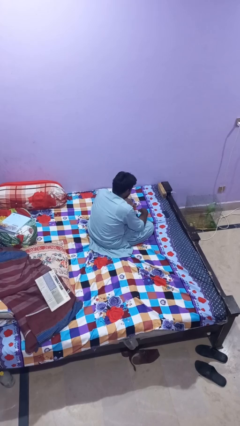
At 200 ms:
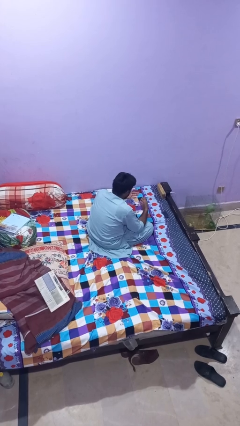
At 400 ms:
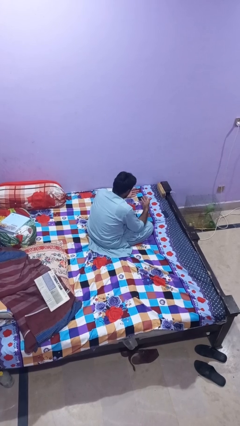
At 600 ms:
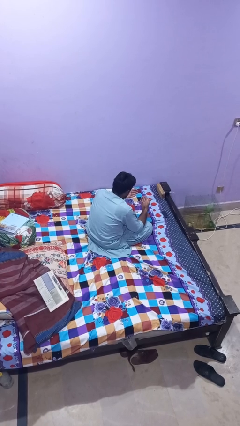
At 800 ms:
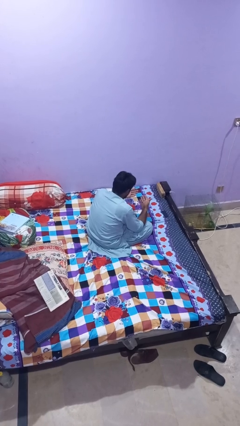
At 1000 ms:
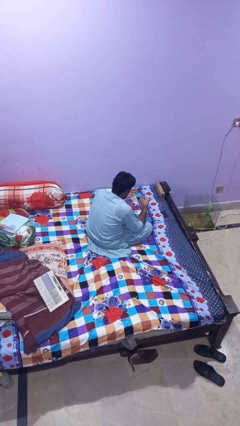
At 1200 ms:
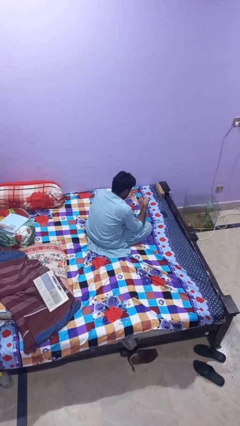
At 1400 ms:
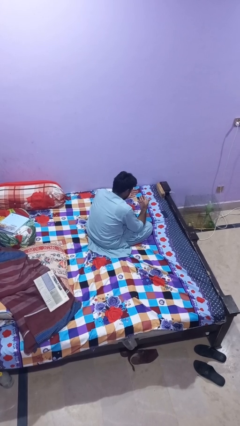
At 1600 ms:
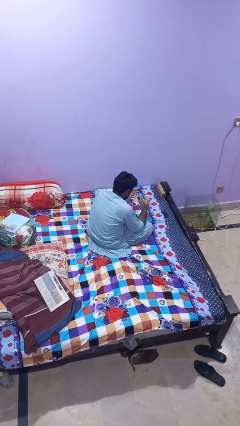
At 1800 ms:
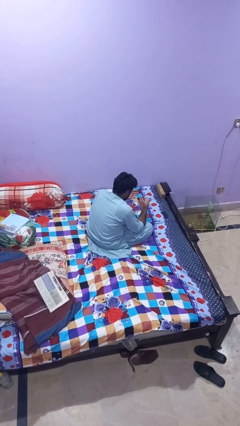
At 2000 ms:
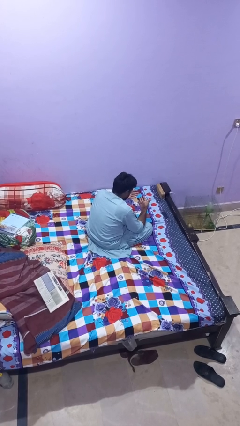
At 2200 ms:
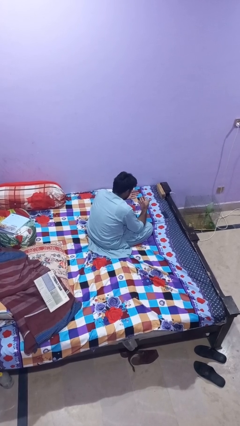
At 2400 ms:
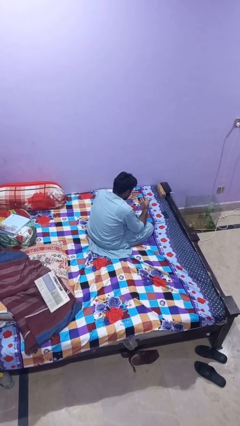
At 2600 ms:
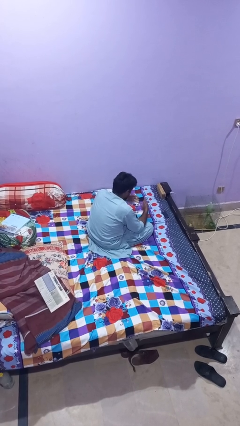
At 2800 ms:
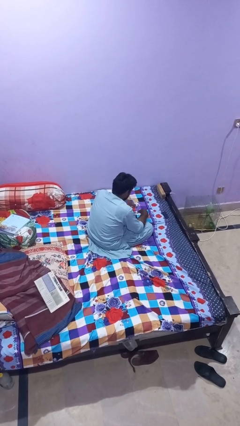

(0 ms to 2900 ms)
person looks at hands in lap

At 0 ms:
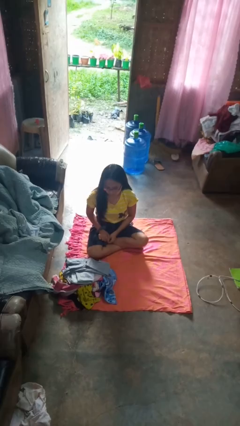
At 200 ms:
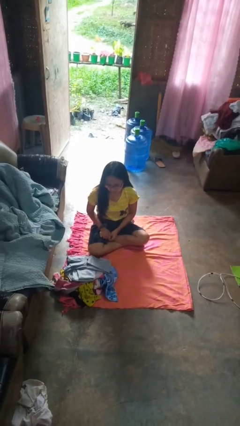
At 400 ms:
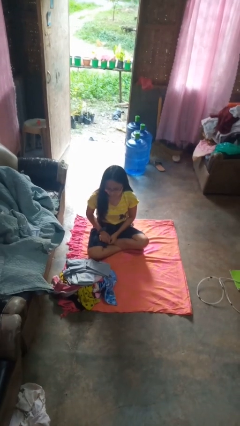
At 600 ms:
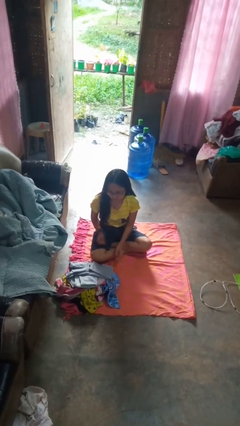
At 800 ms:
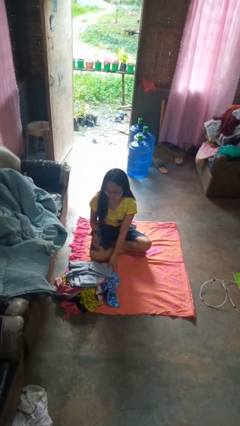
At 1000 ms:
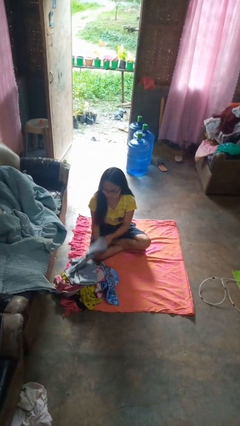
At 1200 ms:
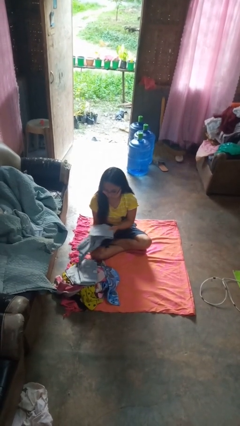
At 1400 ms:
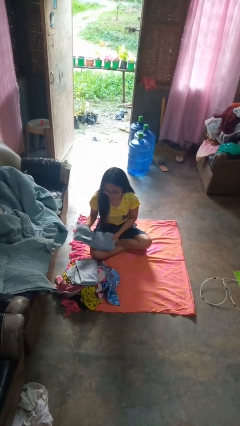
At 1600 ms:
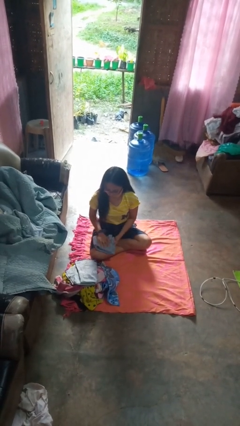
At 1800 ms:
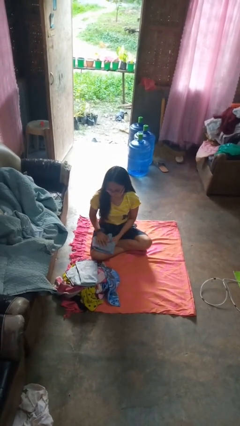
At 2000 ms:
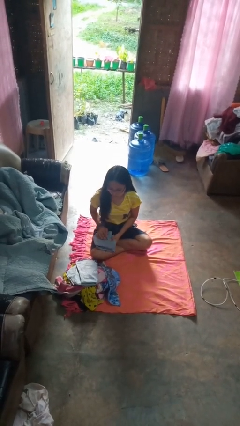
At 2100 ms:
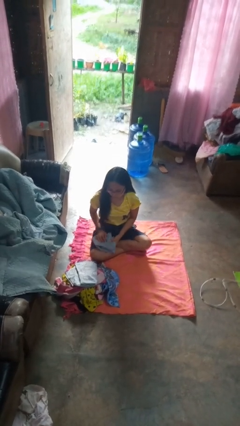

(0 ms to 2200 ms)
person folds shirt

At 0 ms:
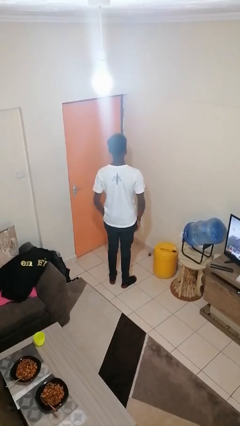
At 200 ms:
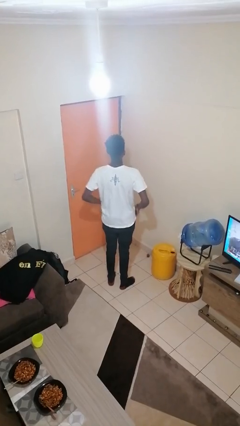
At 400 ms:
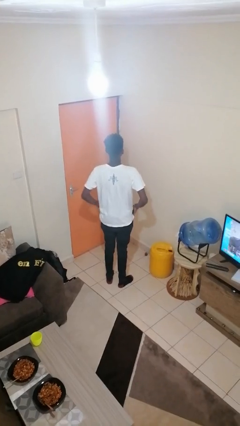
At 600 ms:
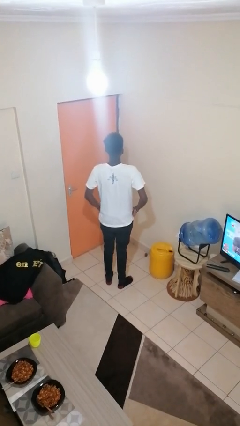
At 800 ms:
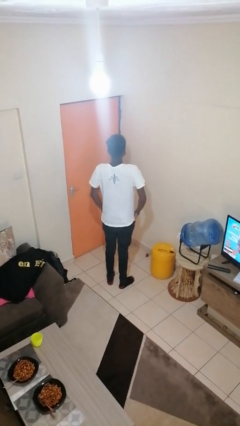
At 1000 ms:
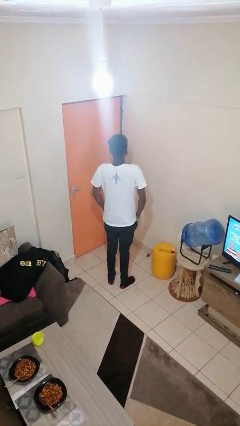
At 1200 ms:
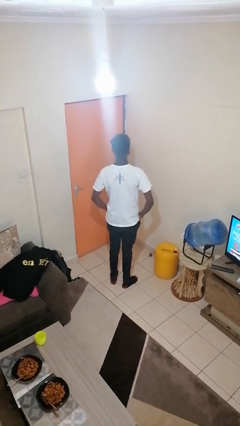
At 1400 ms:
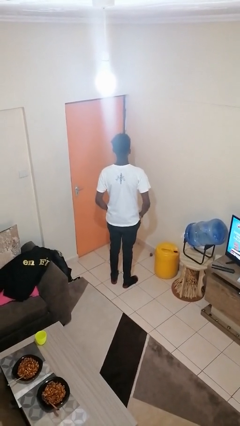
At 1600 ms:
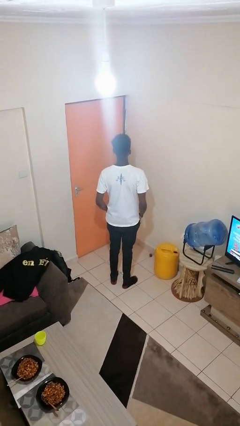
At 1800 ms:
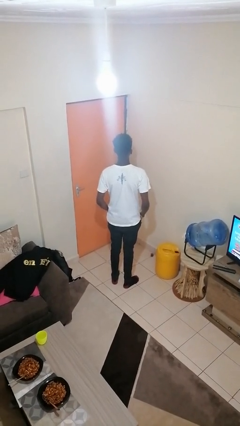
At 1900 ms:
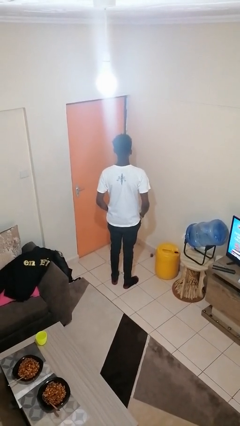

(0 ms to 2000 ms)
person puts hands in back pockets

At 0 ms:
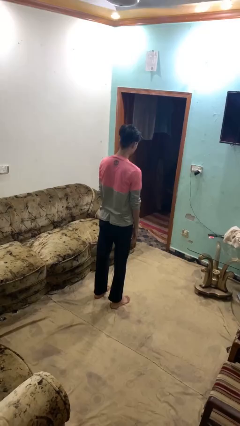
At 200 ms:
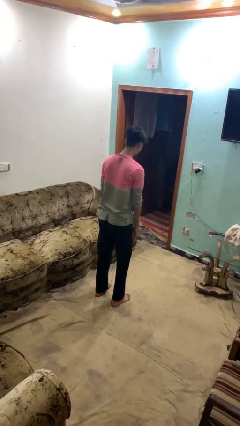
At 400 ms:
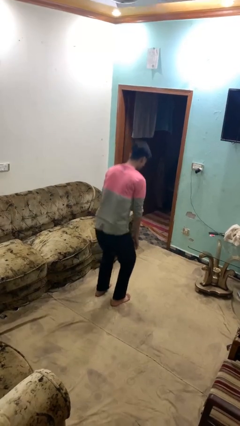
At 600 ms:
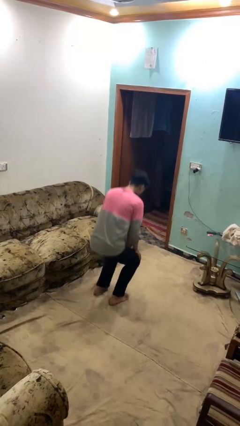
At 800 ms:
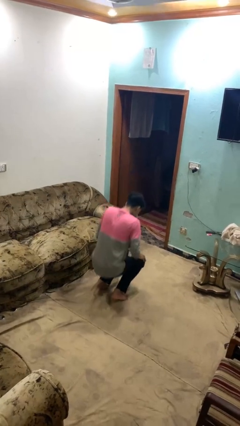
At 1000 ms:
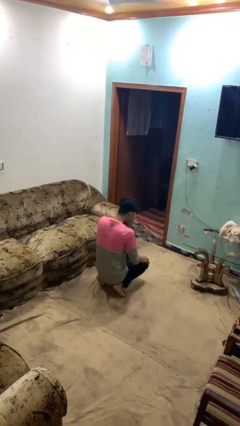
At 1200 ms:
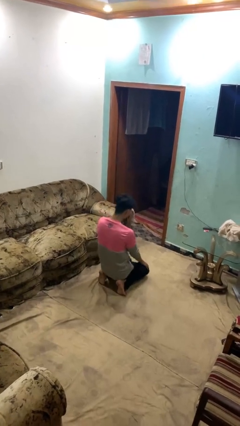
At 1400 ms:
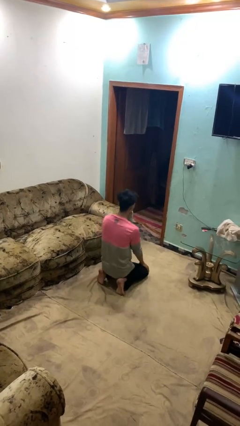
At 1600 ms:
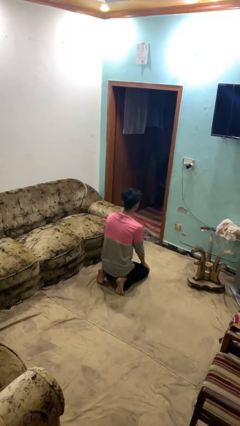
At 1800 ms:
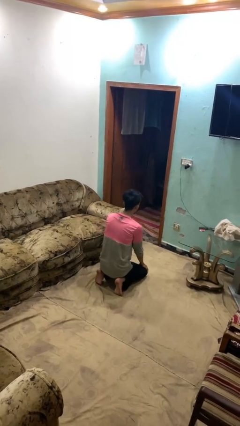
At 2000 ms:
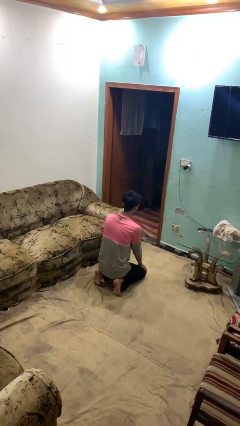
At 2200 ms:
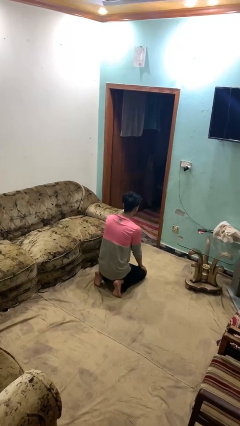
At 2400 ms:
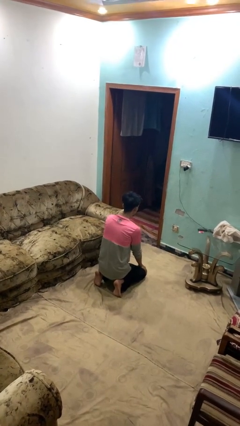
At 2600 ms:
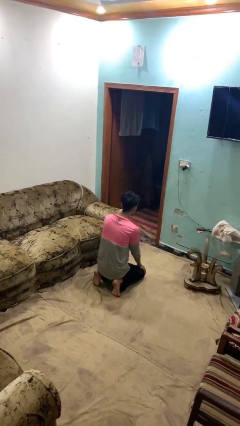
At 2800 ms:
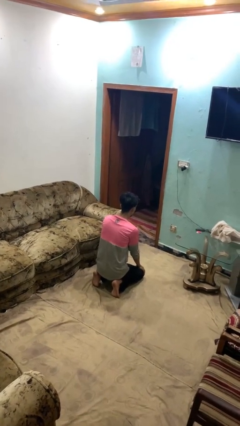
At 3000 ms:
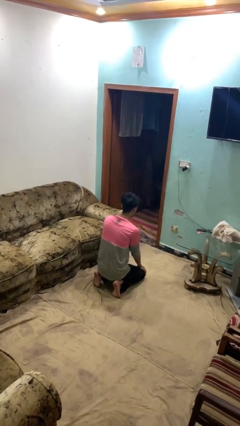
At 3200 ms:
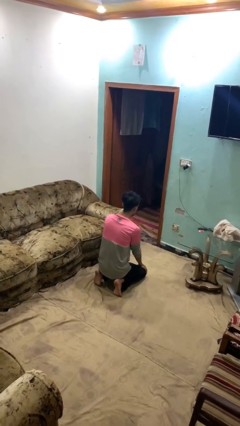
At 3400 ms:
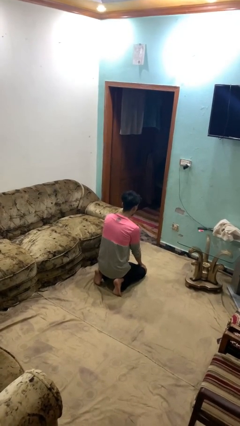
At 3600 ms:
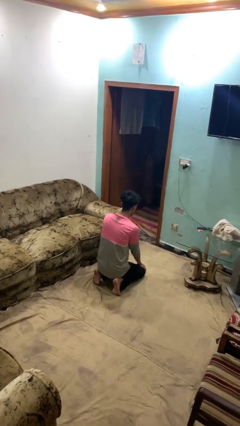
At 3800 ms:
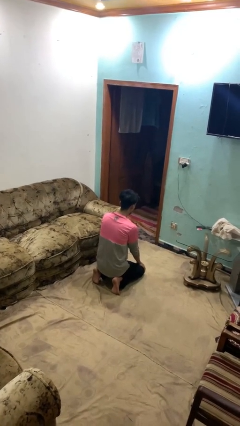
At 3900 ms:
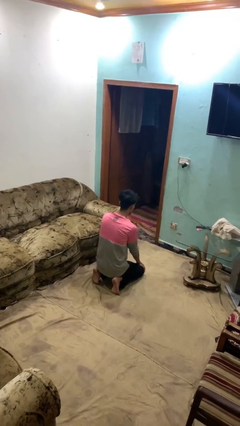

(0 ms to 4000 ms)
person kneels

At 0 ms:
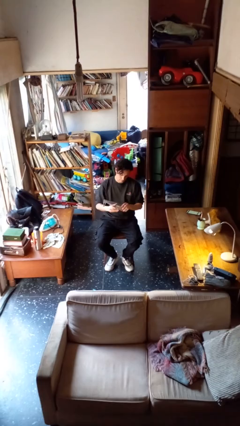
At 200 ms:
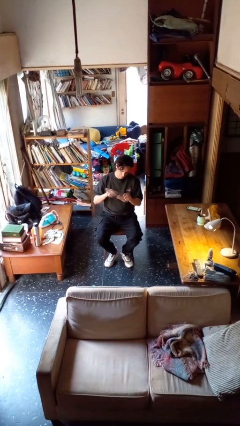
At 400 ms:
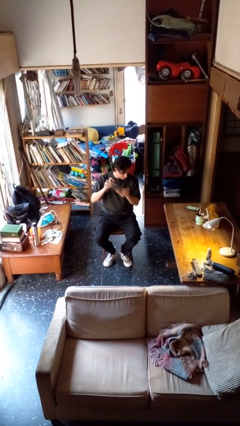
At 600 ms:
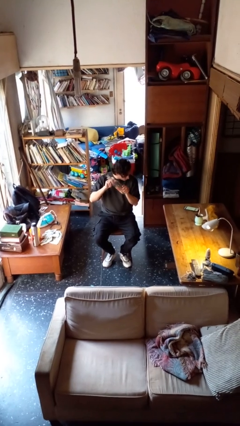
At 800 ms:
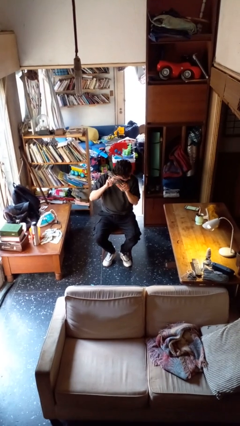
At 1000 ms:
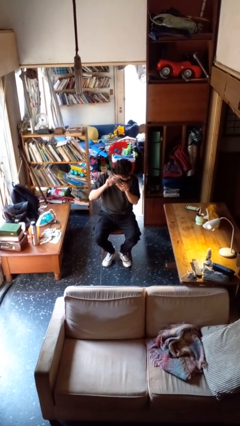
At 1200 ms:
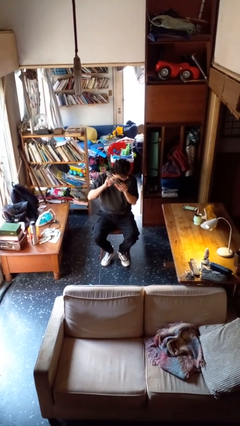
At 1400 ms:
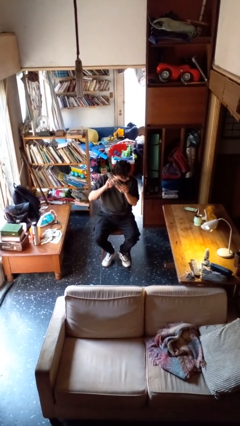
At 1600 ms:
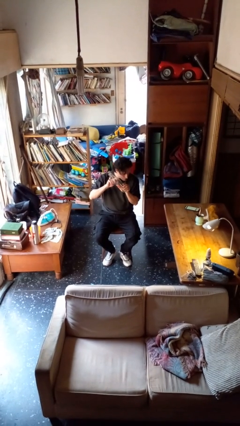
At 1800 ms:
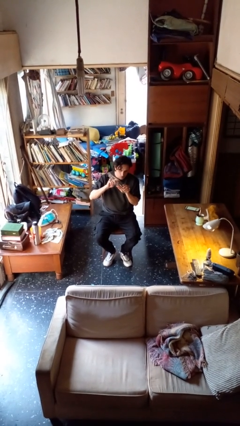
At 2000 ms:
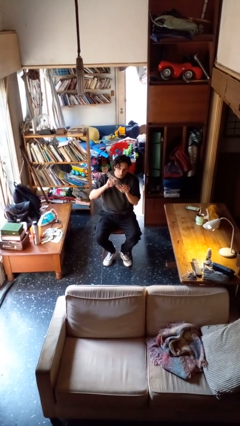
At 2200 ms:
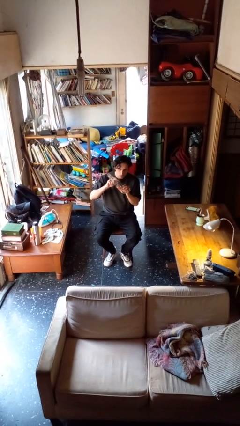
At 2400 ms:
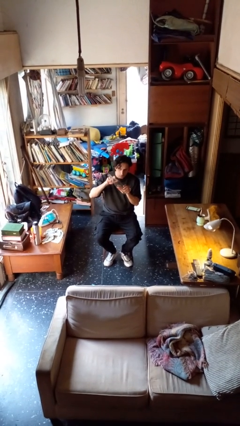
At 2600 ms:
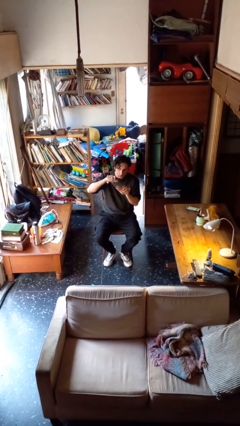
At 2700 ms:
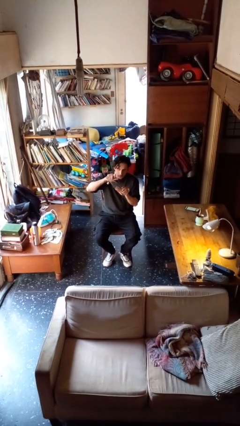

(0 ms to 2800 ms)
person taps object with finger

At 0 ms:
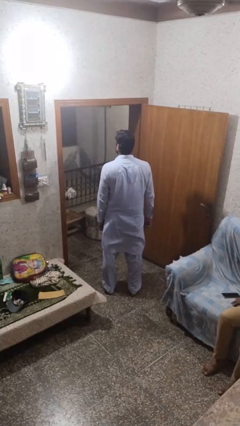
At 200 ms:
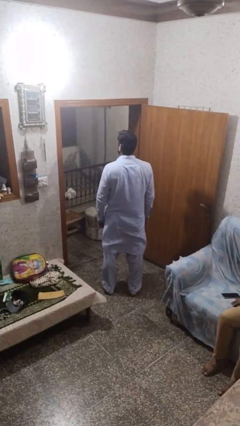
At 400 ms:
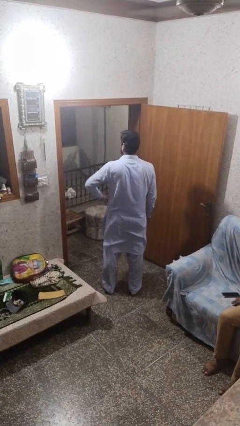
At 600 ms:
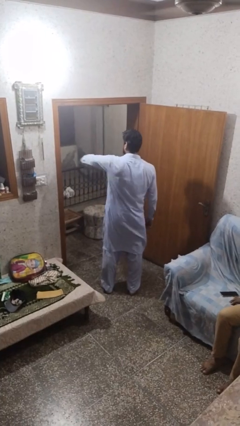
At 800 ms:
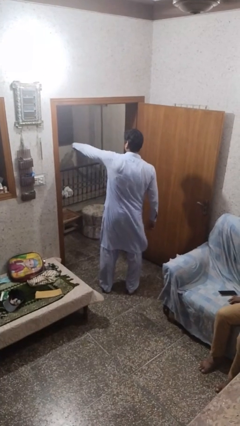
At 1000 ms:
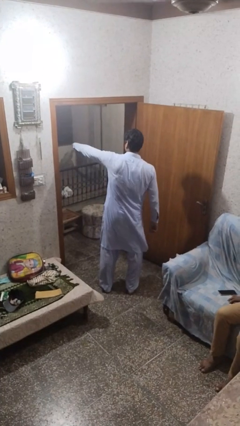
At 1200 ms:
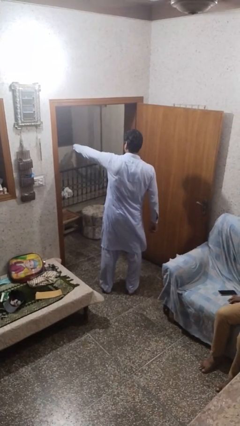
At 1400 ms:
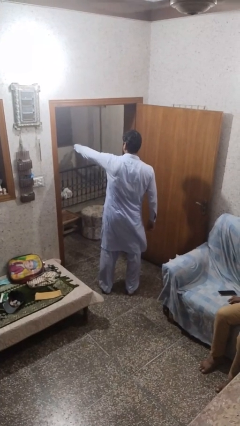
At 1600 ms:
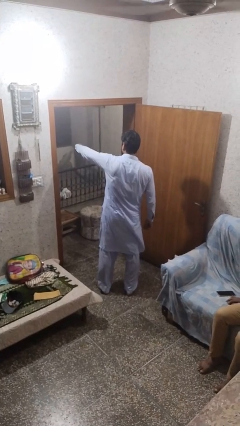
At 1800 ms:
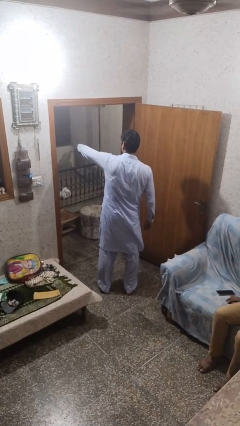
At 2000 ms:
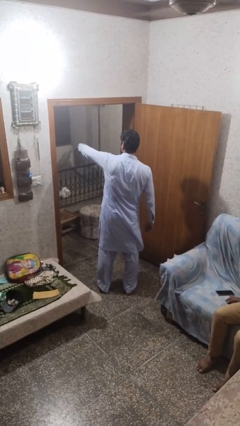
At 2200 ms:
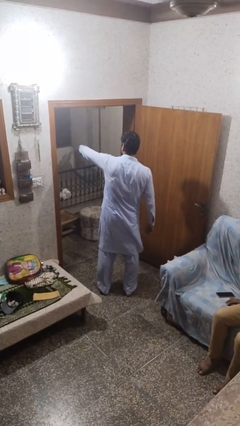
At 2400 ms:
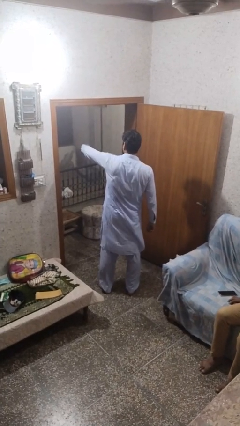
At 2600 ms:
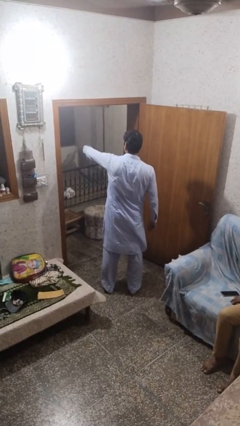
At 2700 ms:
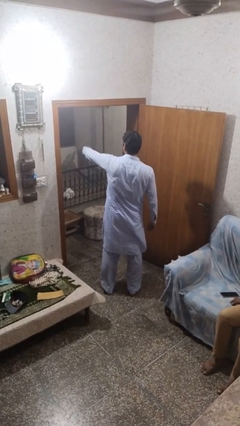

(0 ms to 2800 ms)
person karate chop

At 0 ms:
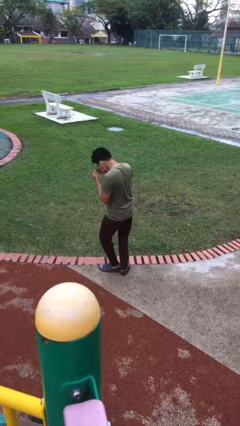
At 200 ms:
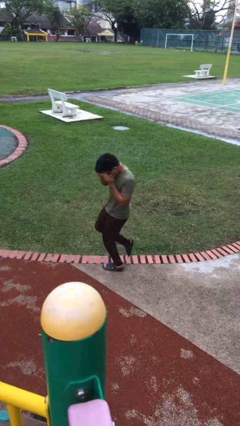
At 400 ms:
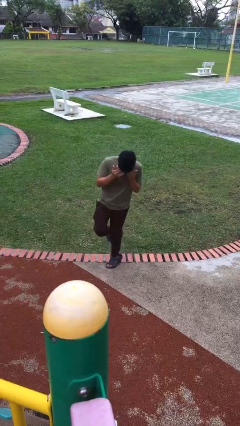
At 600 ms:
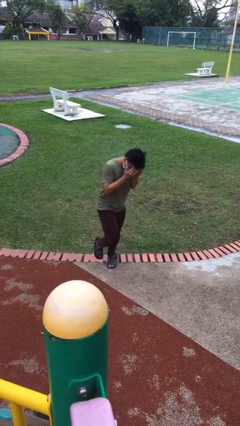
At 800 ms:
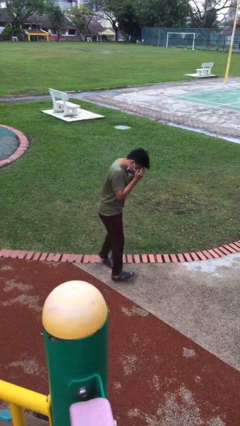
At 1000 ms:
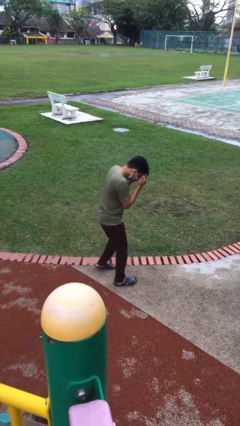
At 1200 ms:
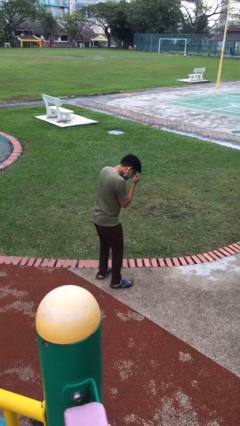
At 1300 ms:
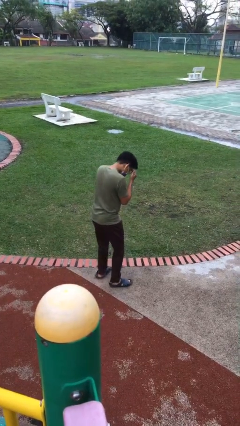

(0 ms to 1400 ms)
person twirls
